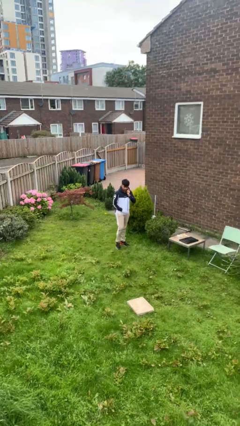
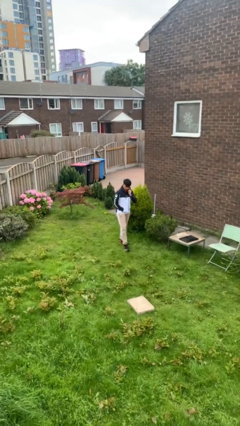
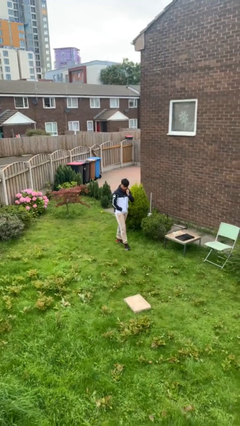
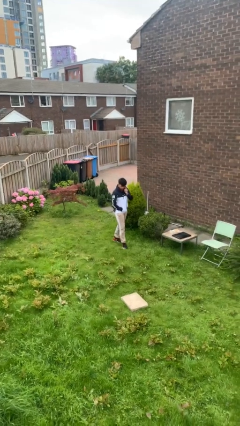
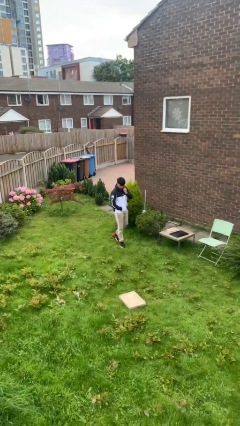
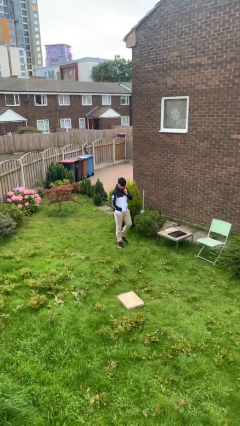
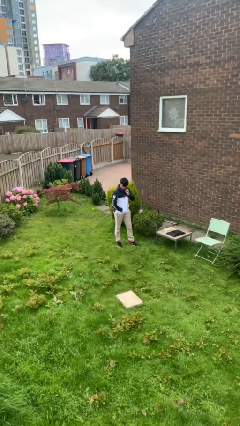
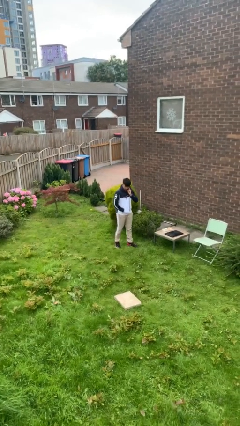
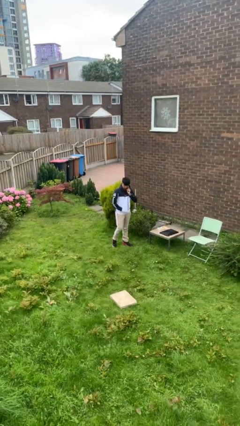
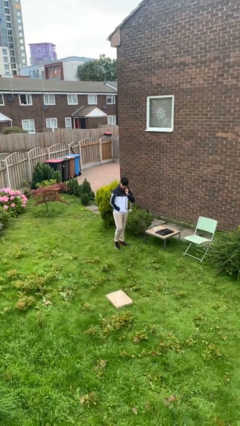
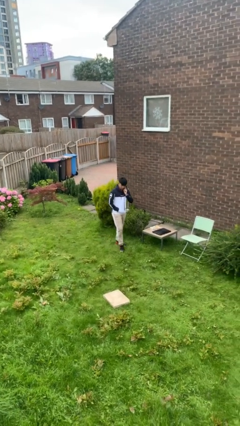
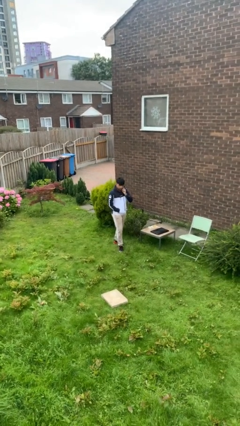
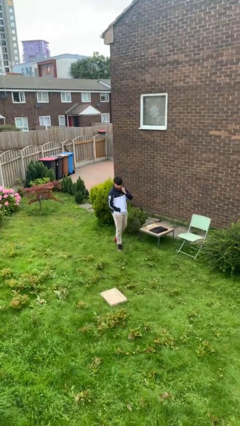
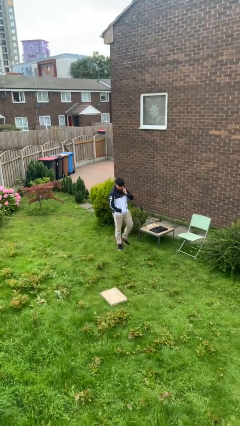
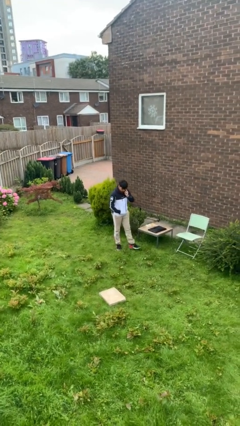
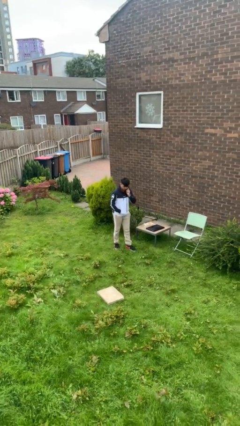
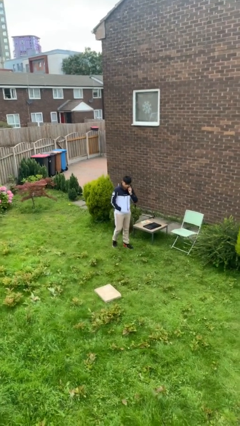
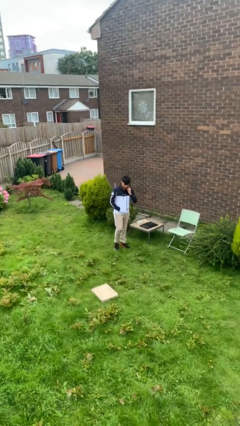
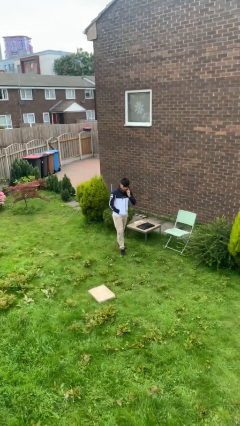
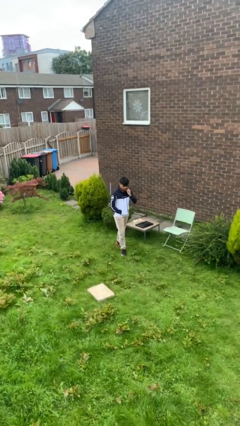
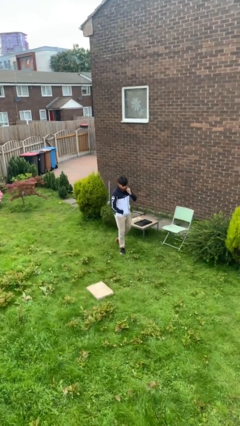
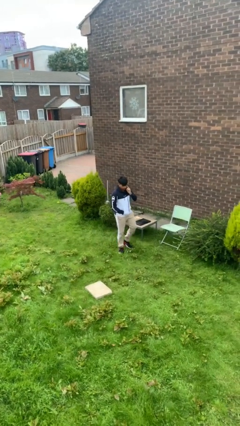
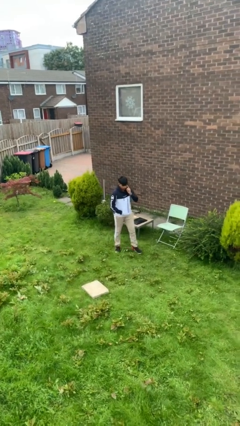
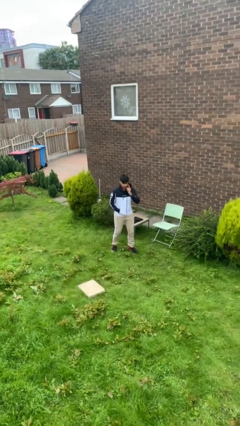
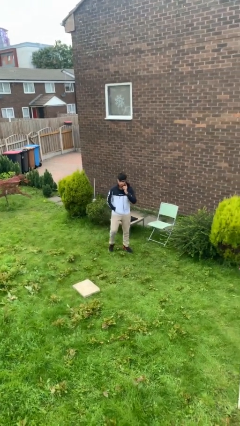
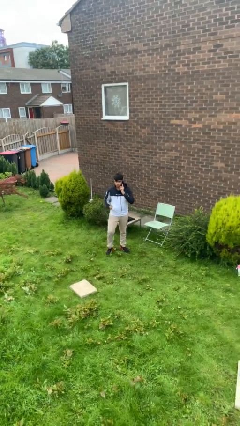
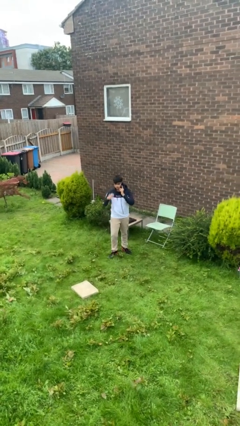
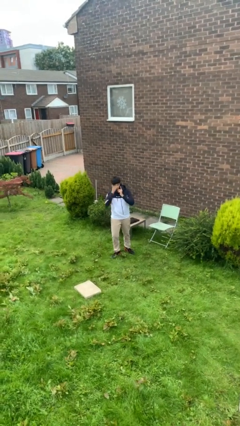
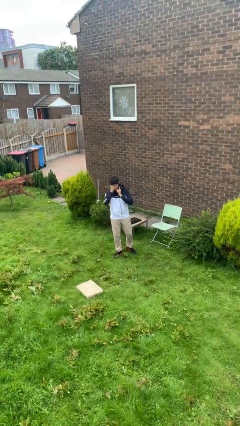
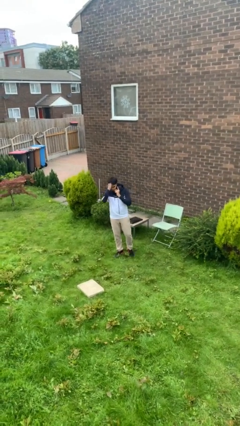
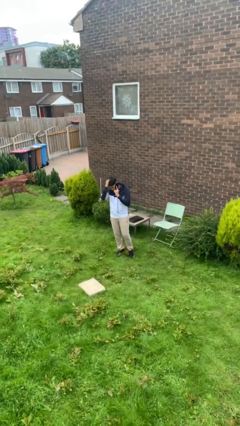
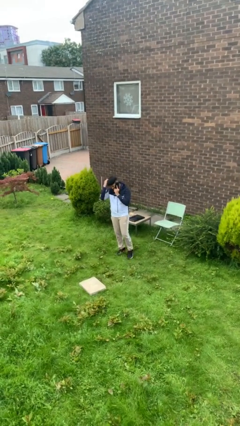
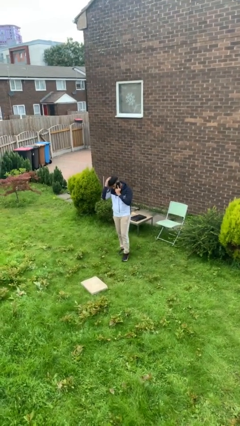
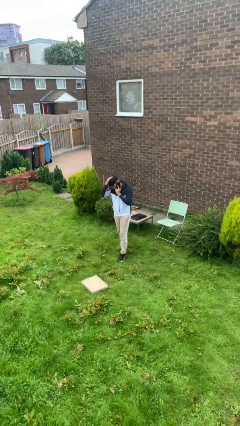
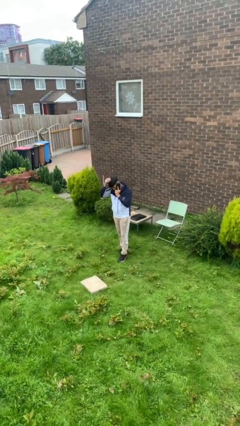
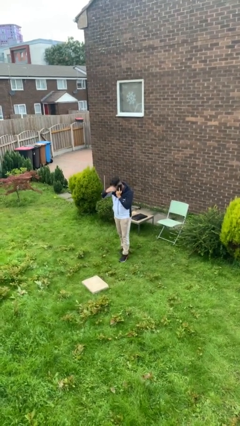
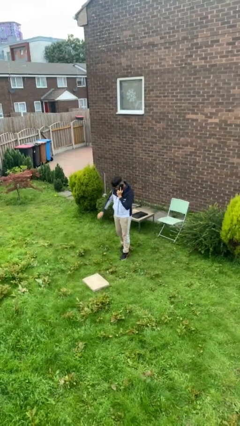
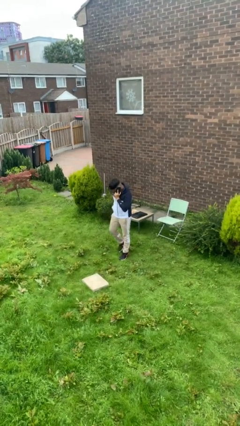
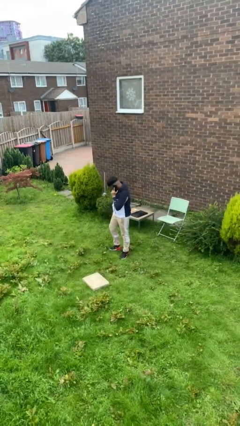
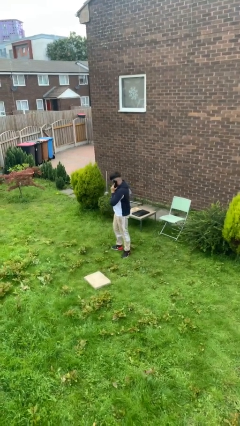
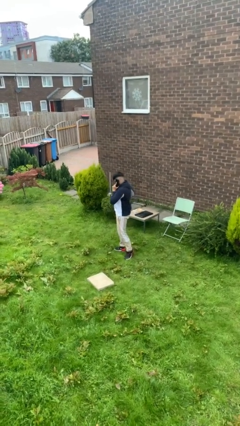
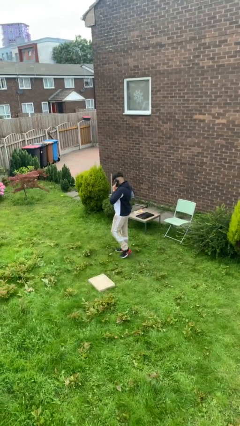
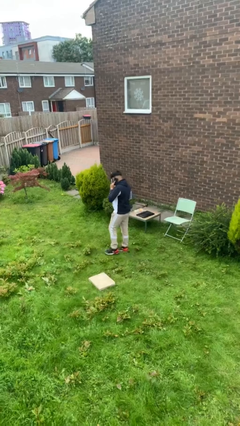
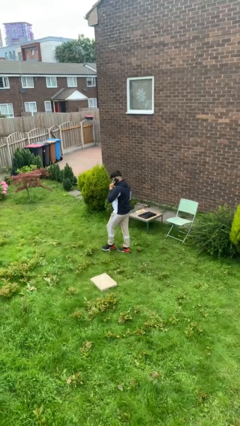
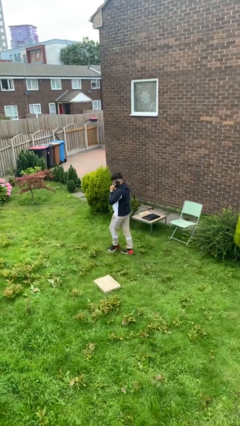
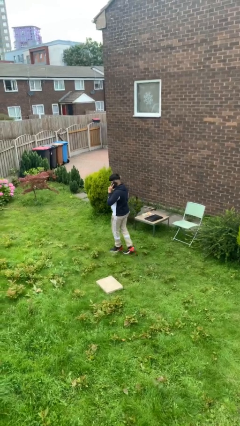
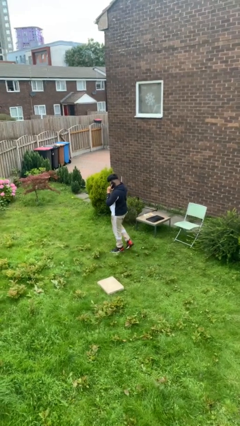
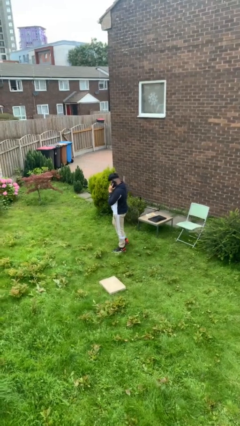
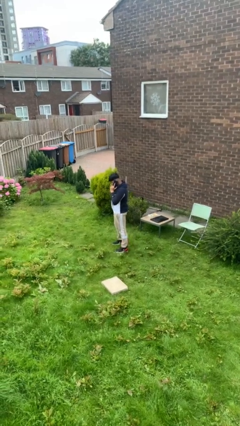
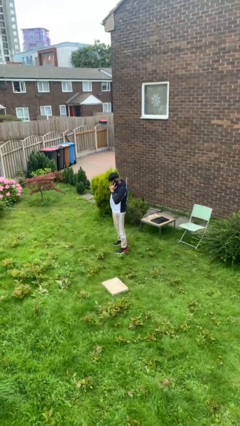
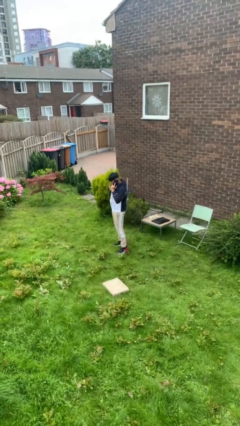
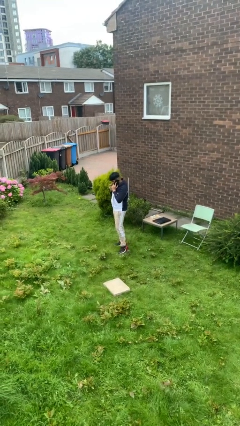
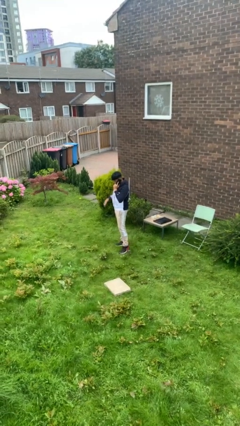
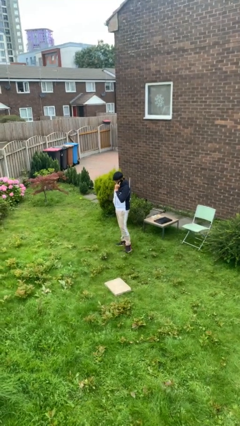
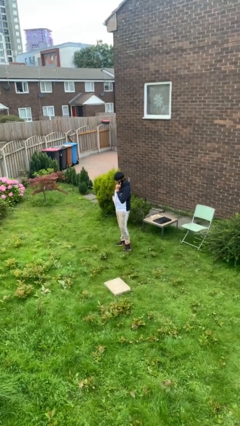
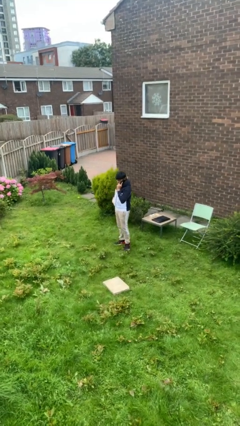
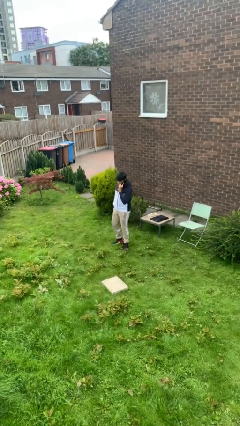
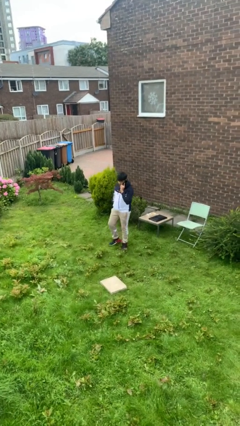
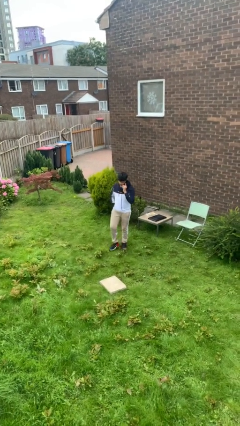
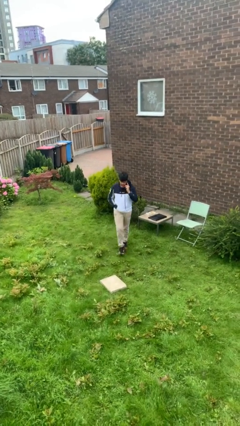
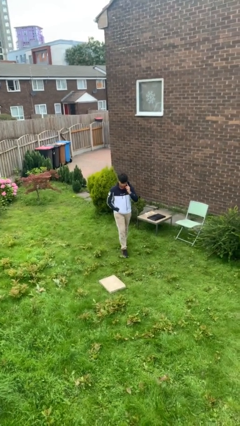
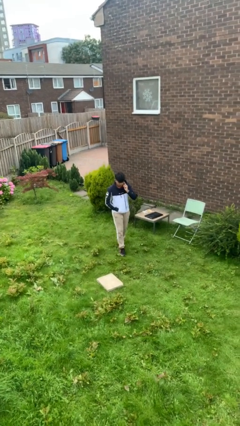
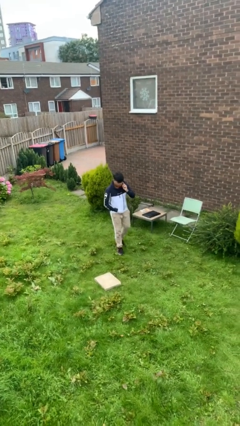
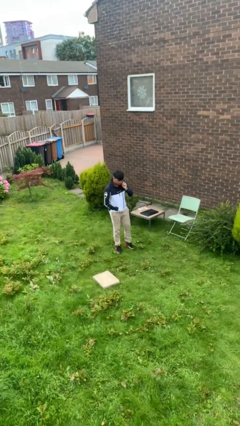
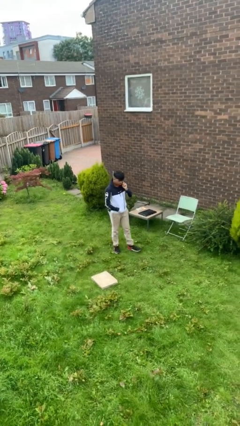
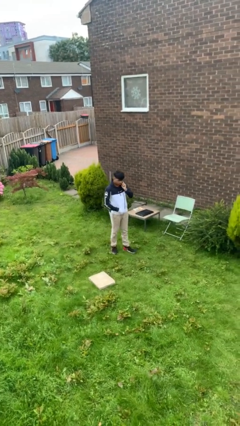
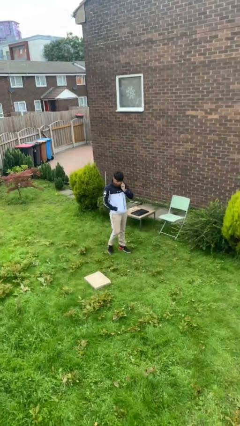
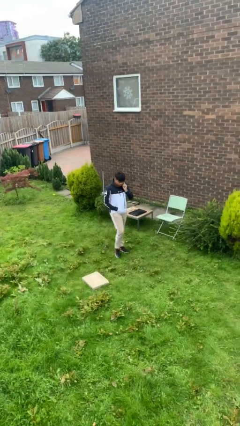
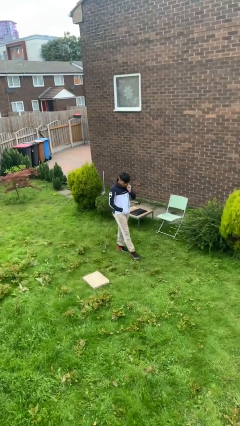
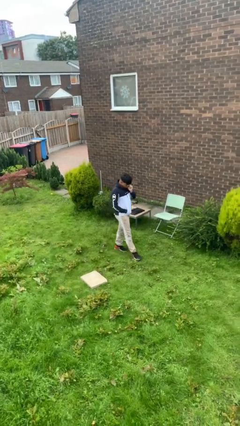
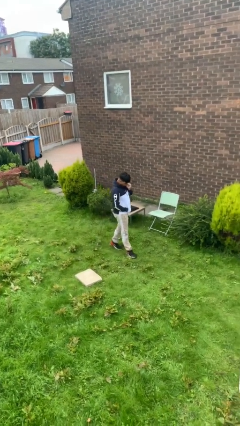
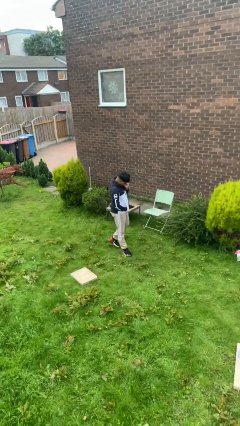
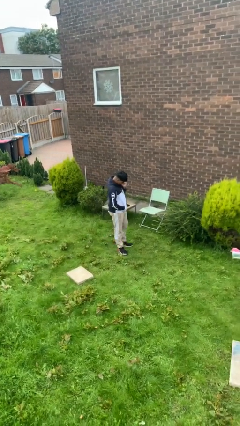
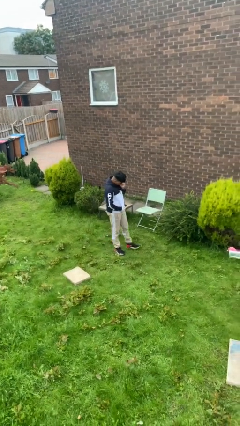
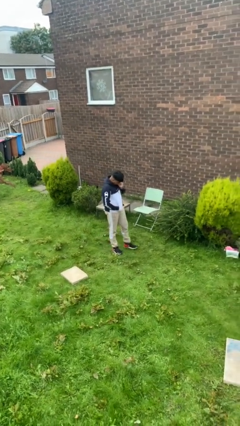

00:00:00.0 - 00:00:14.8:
person talks on phone

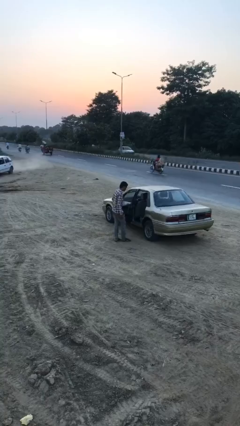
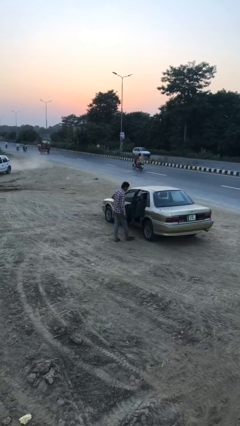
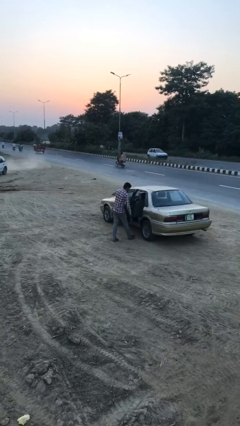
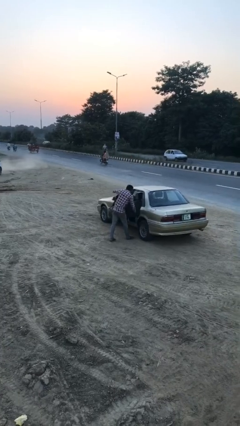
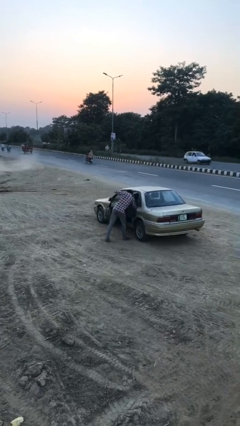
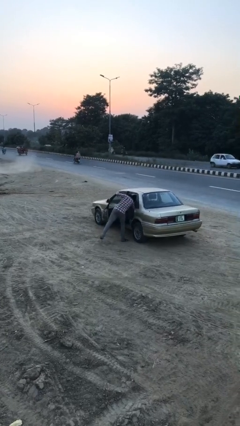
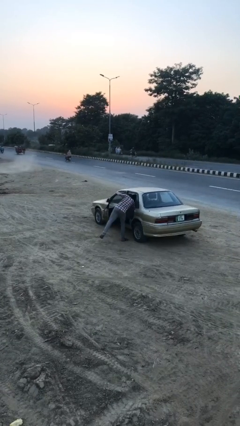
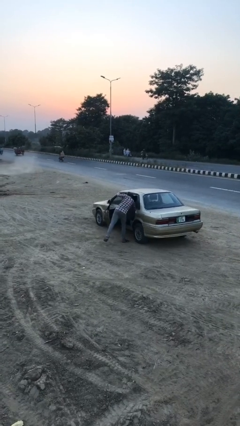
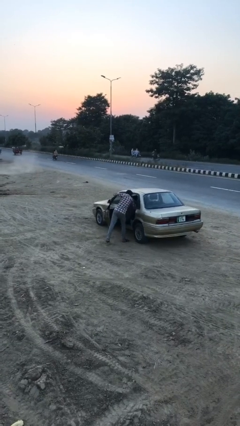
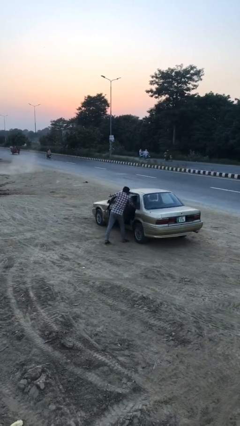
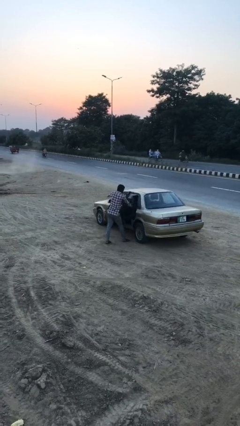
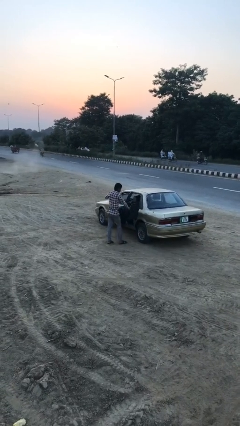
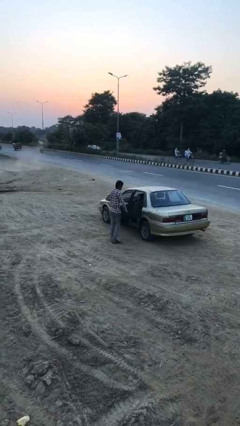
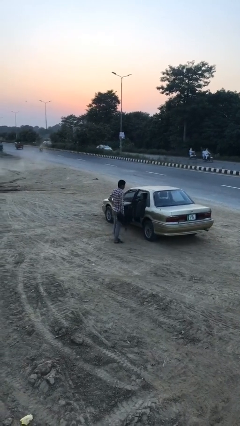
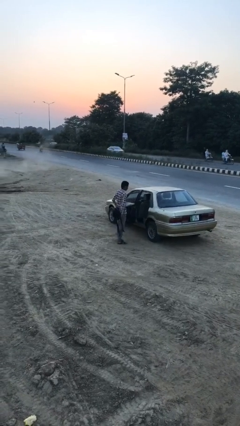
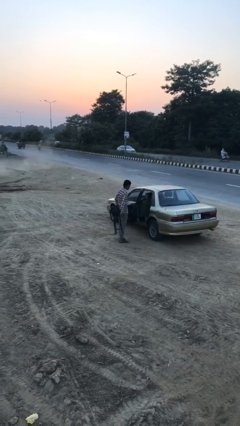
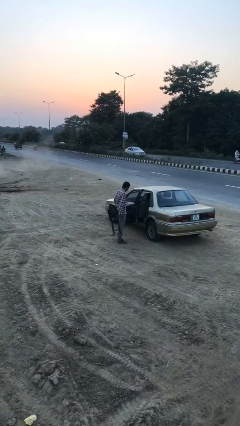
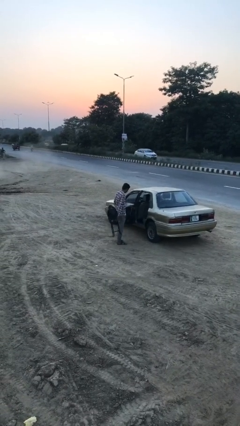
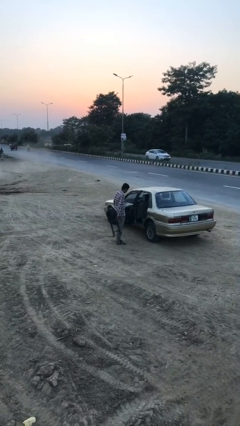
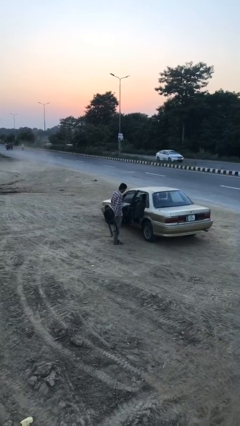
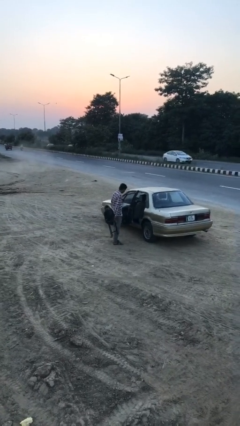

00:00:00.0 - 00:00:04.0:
person unloads car
